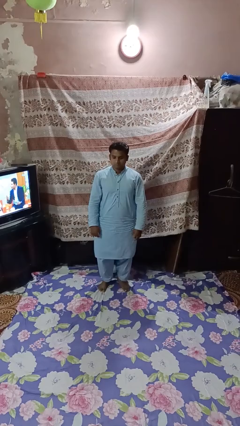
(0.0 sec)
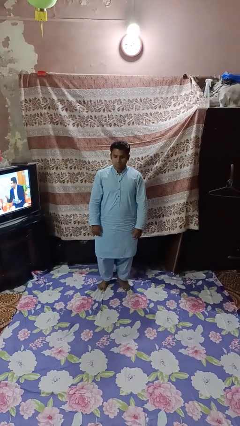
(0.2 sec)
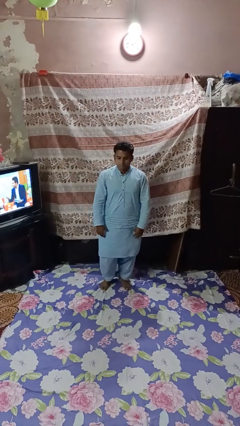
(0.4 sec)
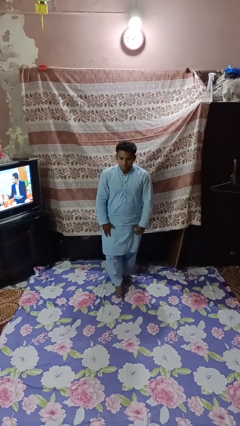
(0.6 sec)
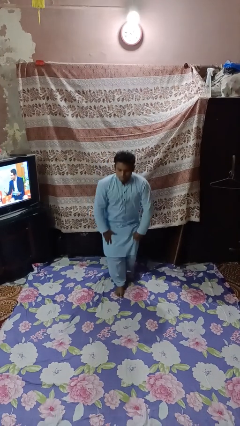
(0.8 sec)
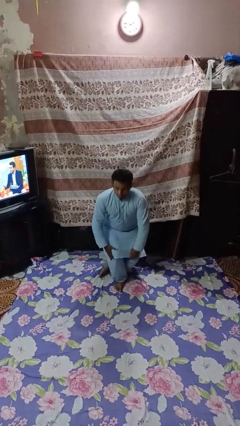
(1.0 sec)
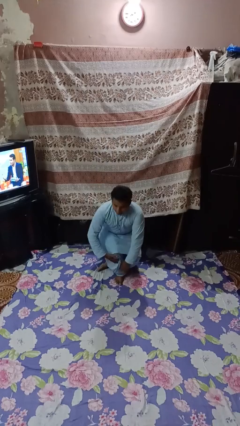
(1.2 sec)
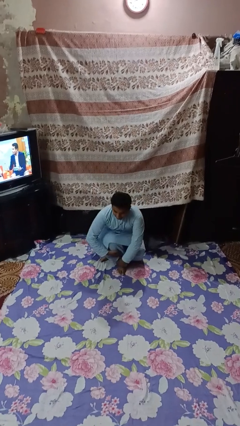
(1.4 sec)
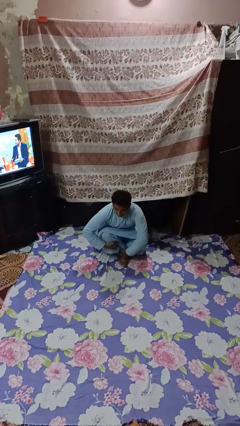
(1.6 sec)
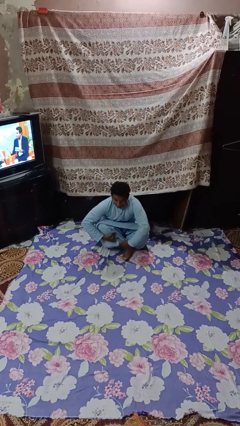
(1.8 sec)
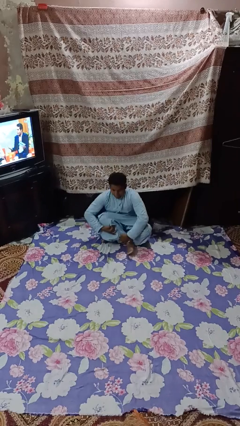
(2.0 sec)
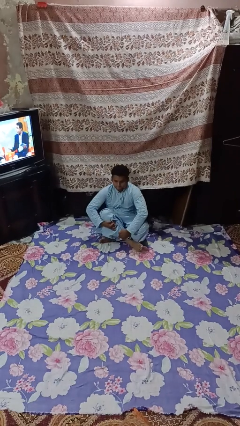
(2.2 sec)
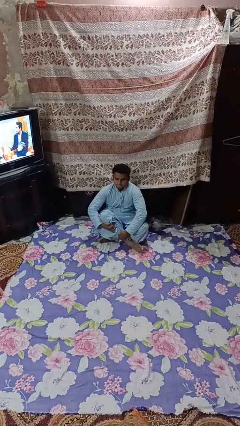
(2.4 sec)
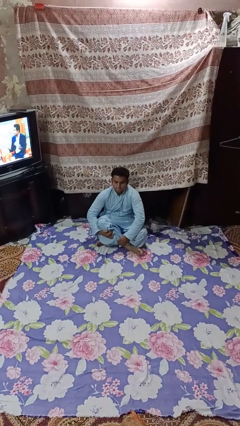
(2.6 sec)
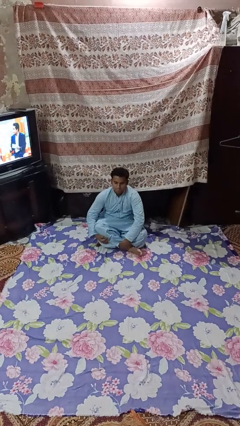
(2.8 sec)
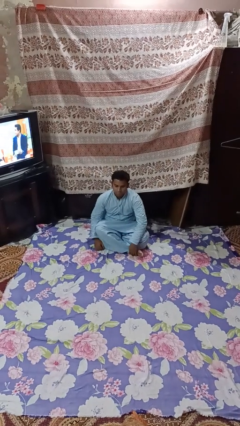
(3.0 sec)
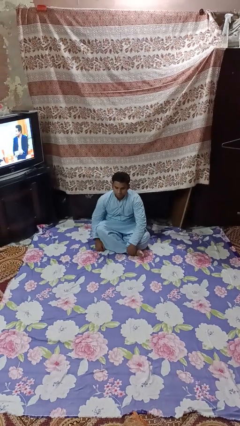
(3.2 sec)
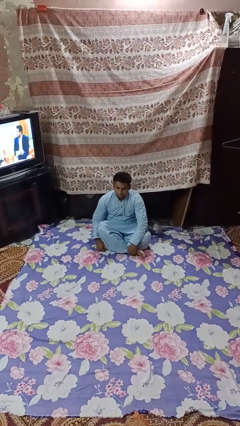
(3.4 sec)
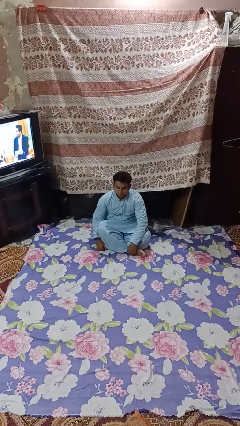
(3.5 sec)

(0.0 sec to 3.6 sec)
person sits crisscross

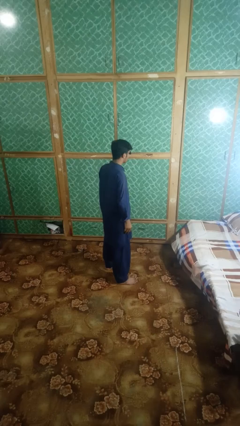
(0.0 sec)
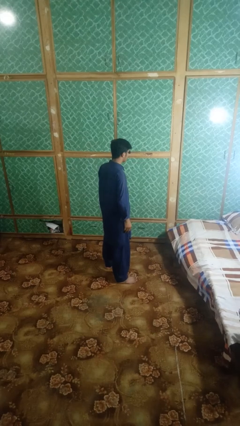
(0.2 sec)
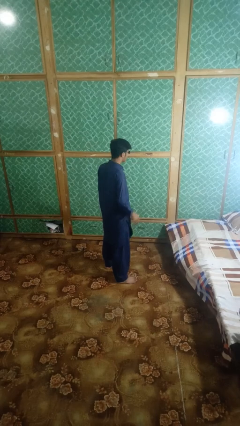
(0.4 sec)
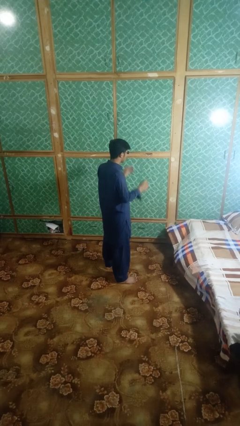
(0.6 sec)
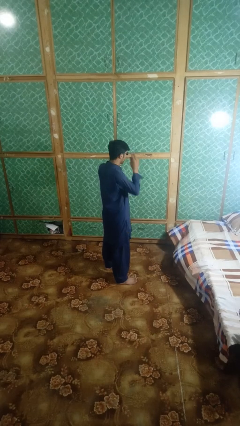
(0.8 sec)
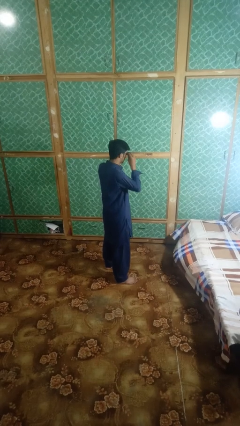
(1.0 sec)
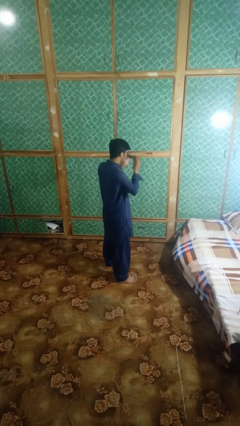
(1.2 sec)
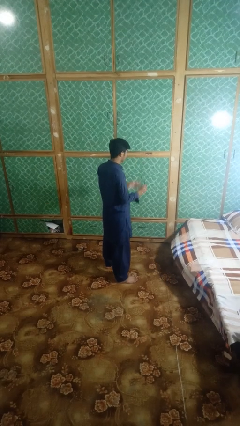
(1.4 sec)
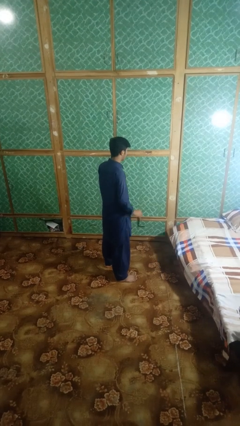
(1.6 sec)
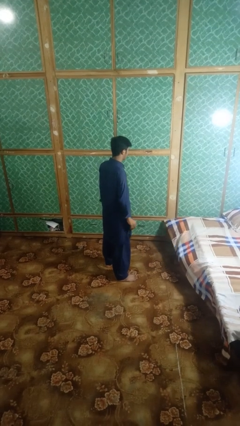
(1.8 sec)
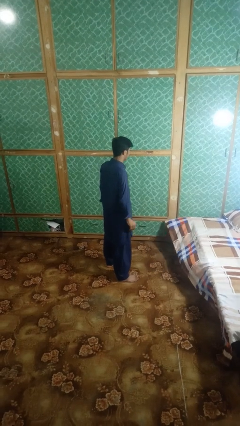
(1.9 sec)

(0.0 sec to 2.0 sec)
person takes off sunglasses

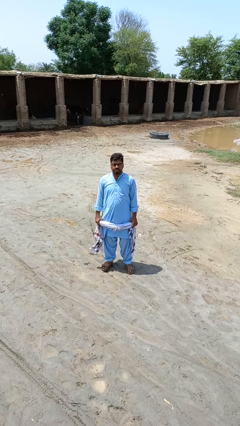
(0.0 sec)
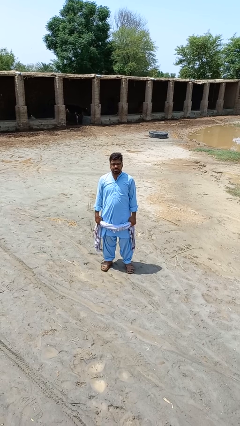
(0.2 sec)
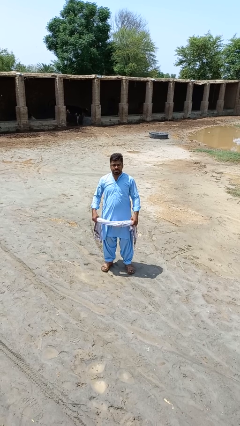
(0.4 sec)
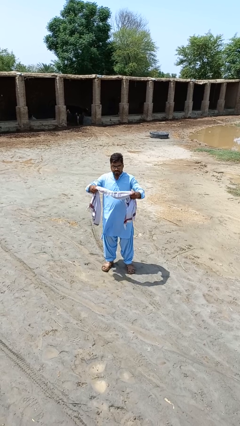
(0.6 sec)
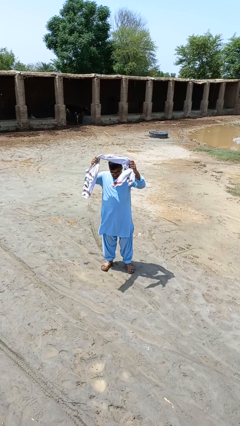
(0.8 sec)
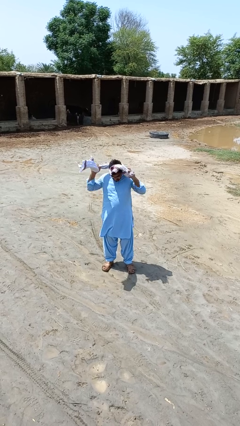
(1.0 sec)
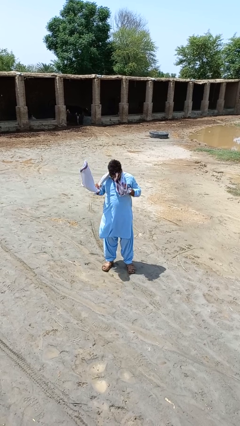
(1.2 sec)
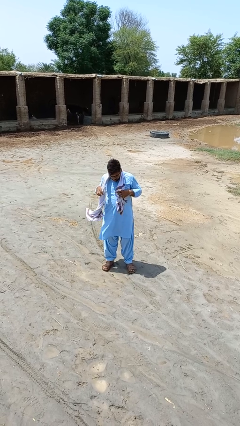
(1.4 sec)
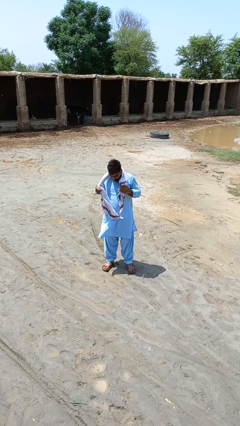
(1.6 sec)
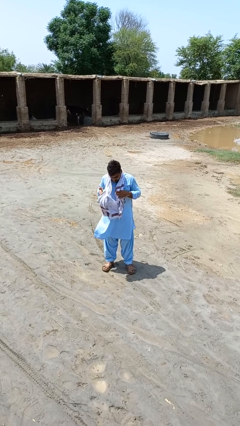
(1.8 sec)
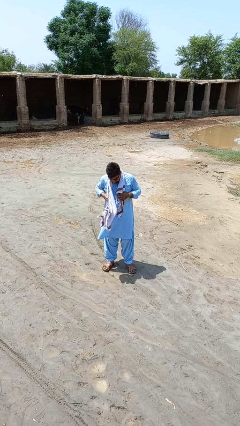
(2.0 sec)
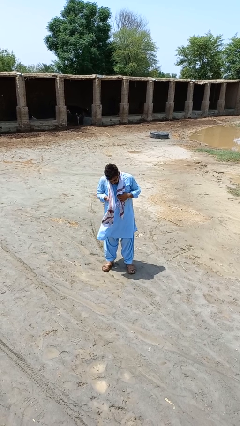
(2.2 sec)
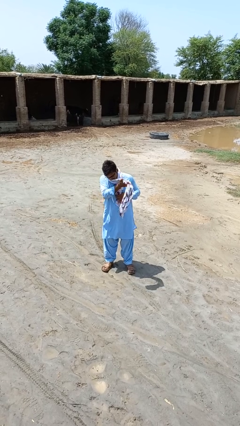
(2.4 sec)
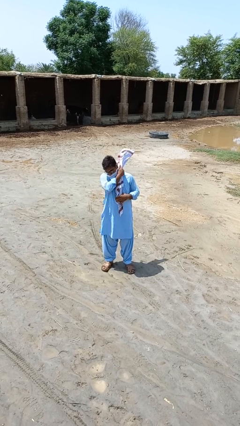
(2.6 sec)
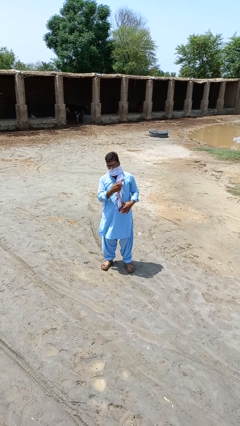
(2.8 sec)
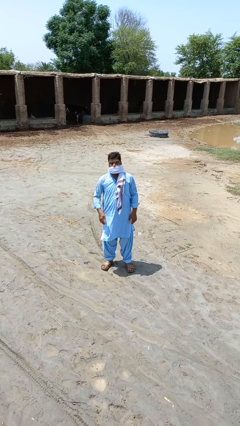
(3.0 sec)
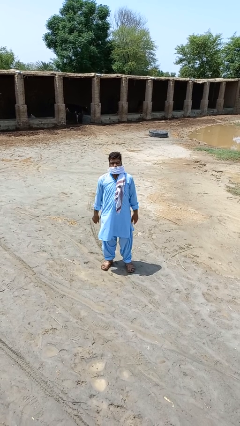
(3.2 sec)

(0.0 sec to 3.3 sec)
person puts on scarf

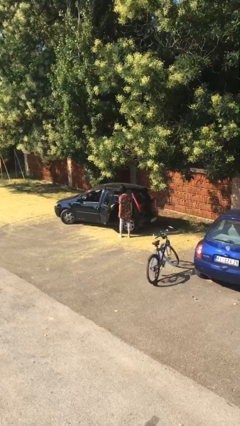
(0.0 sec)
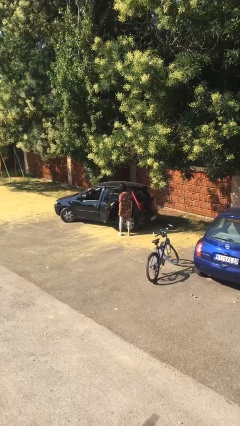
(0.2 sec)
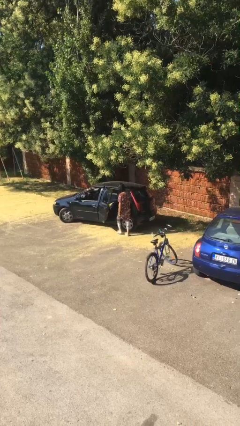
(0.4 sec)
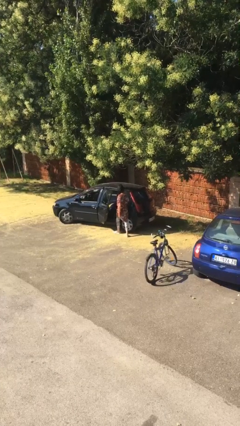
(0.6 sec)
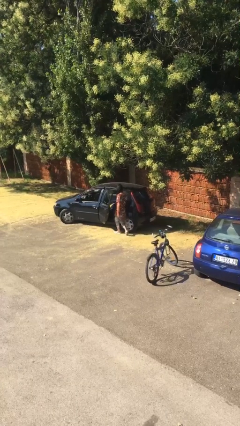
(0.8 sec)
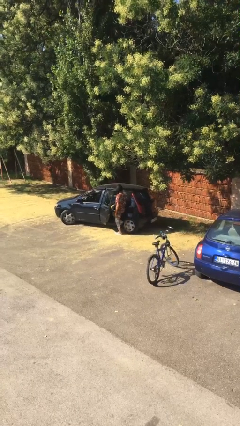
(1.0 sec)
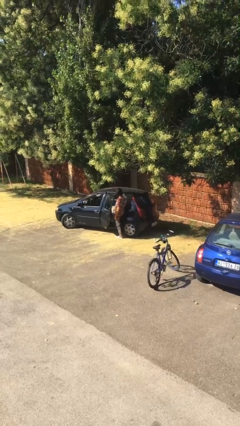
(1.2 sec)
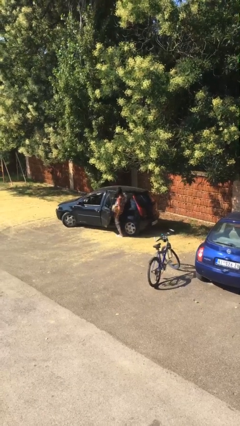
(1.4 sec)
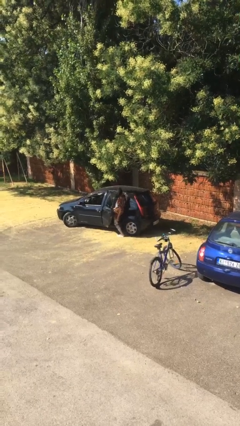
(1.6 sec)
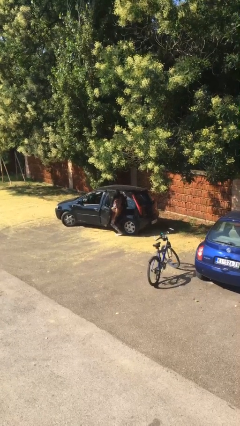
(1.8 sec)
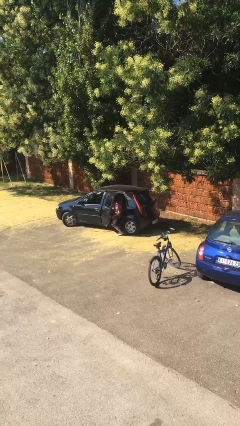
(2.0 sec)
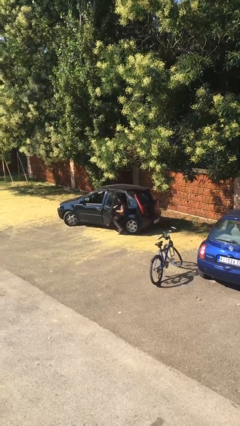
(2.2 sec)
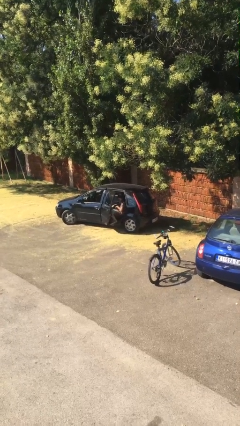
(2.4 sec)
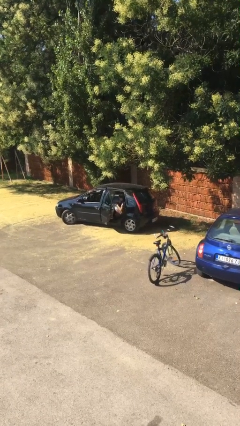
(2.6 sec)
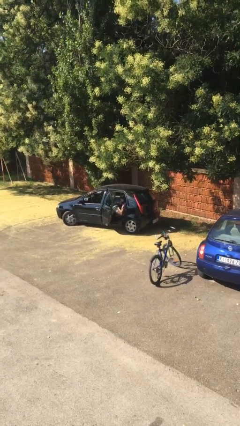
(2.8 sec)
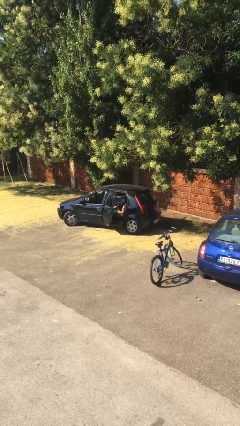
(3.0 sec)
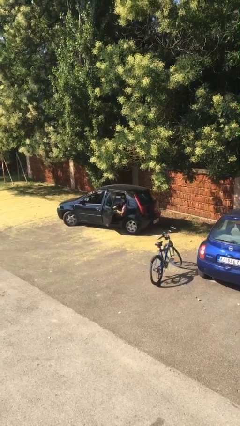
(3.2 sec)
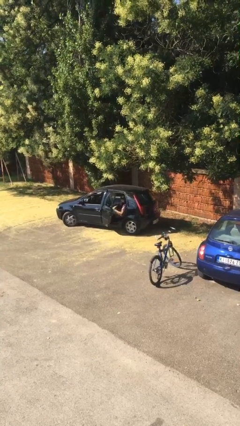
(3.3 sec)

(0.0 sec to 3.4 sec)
person enters car

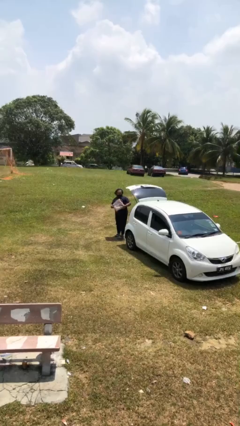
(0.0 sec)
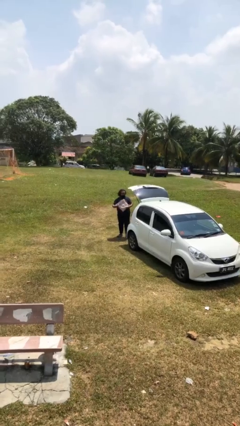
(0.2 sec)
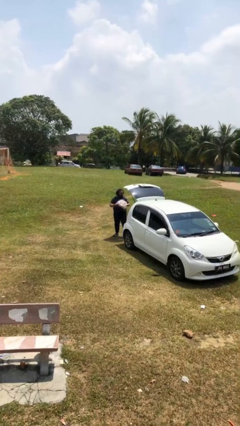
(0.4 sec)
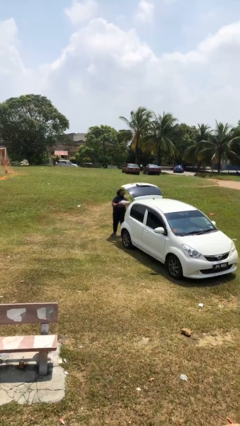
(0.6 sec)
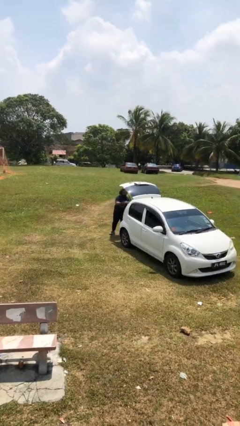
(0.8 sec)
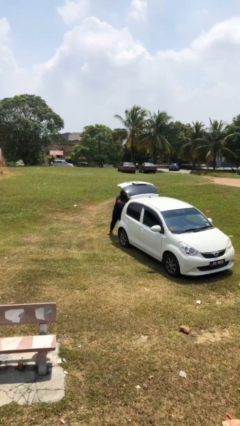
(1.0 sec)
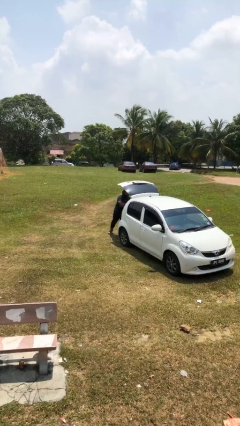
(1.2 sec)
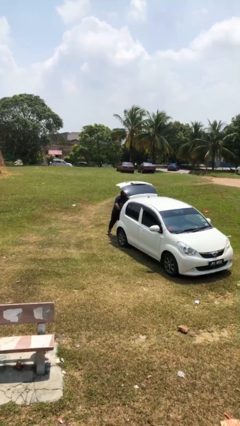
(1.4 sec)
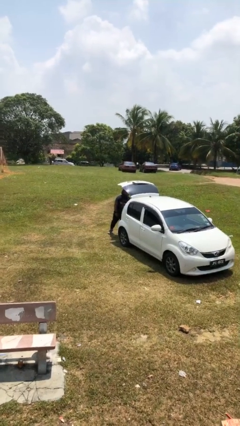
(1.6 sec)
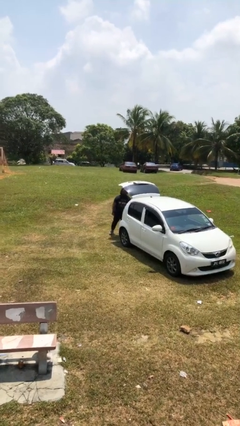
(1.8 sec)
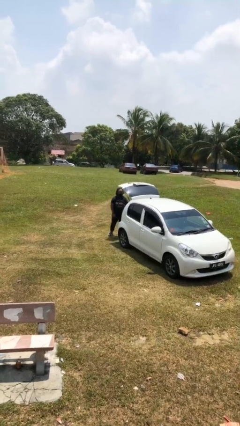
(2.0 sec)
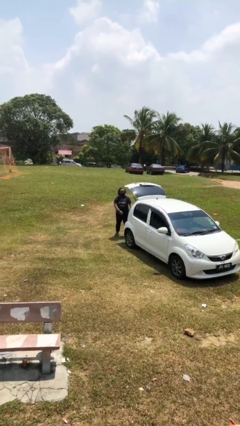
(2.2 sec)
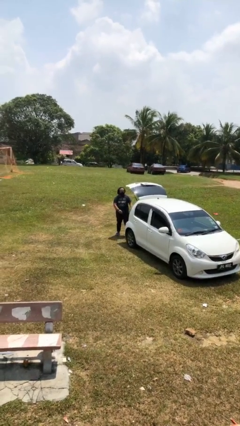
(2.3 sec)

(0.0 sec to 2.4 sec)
person loads car

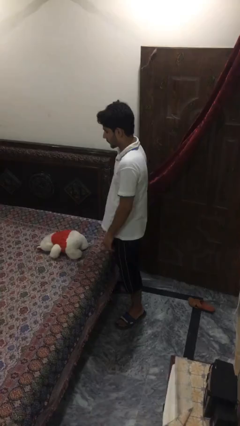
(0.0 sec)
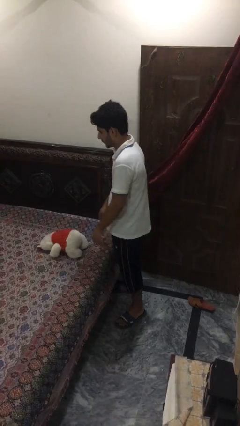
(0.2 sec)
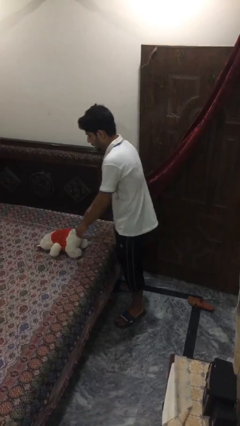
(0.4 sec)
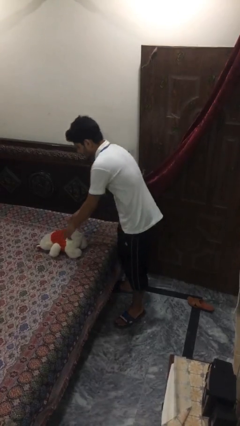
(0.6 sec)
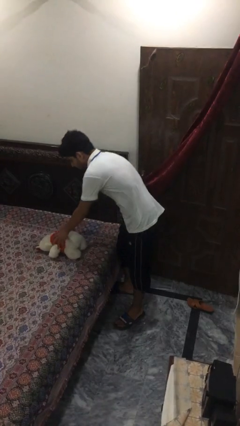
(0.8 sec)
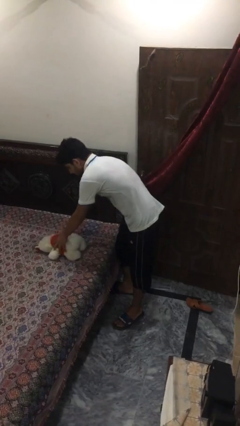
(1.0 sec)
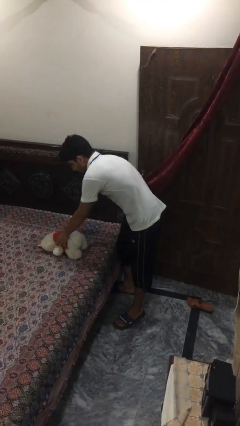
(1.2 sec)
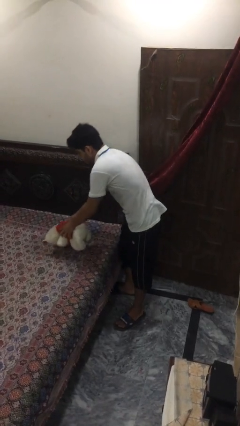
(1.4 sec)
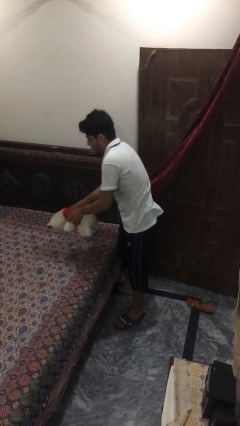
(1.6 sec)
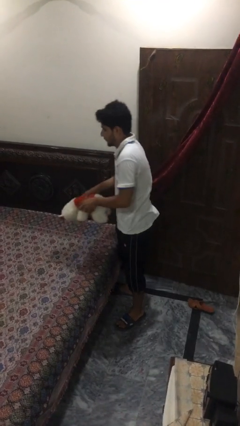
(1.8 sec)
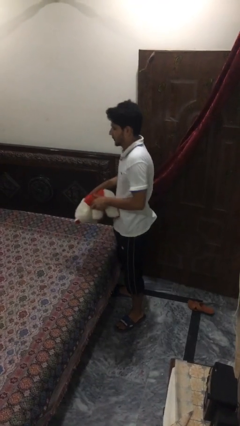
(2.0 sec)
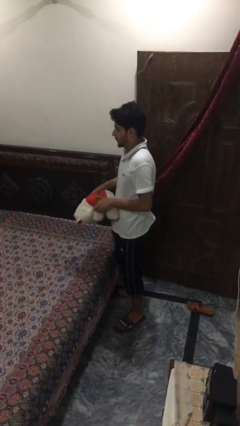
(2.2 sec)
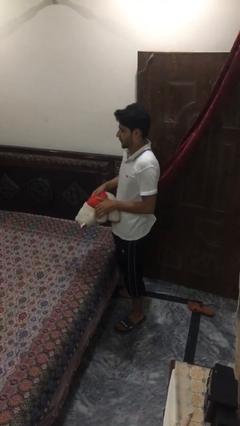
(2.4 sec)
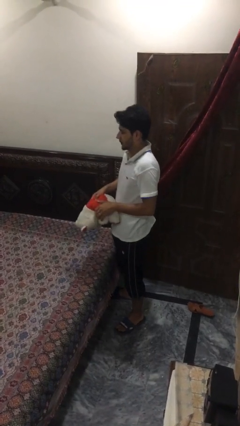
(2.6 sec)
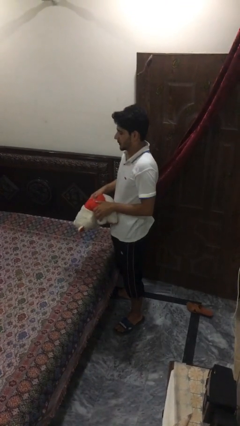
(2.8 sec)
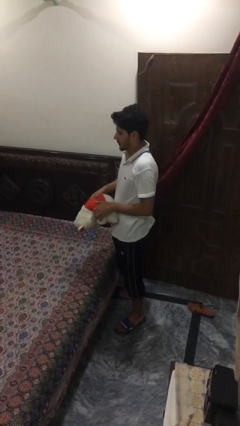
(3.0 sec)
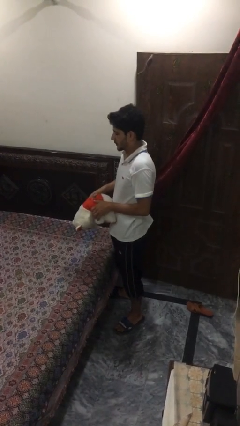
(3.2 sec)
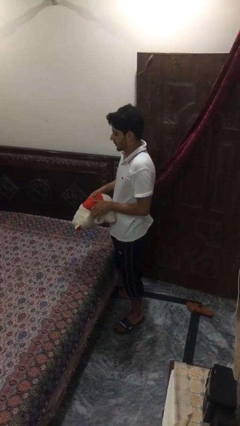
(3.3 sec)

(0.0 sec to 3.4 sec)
person picks up object from bed
